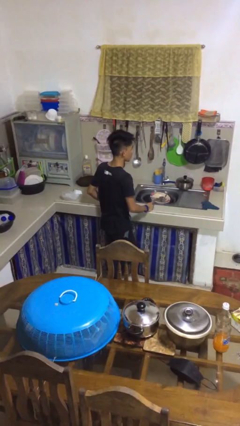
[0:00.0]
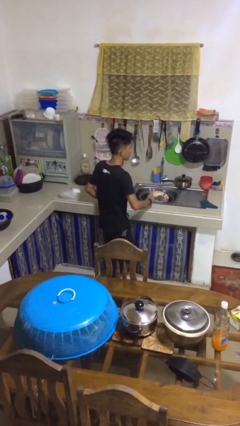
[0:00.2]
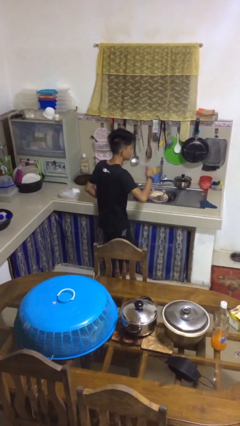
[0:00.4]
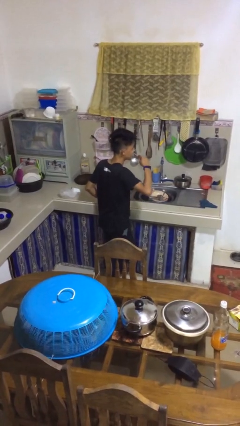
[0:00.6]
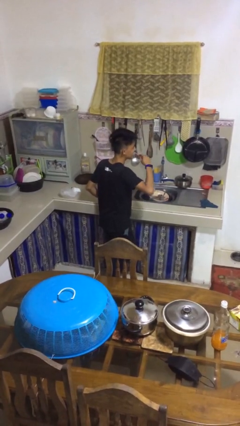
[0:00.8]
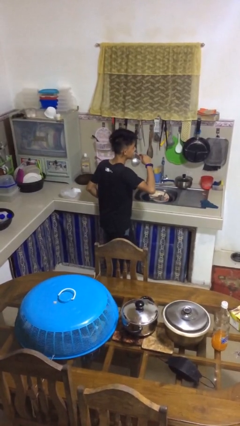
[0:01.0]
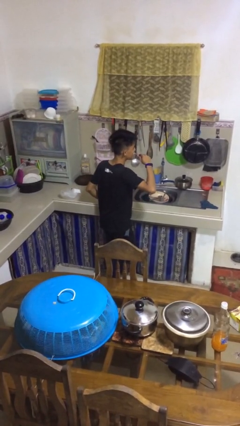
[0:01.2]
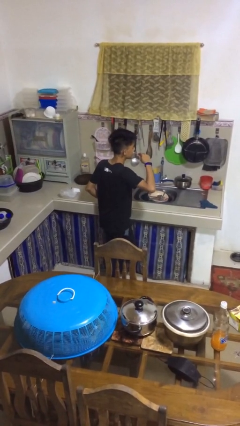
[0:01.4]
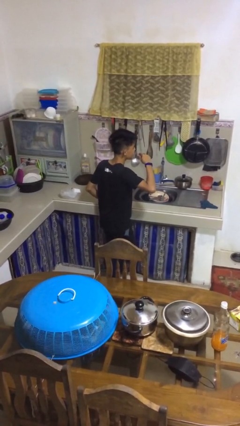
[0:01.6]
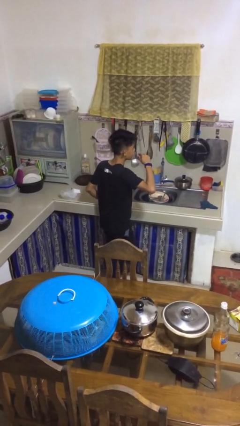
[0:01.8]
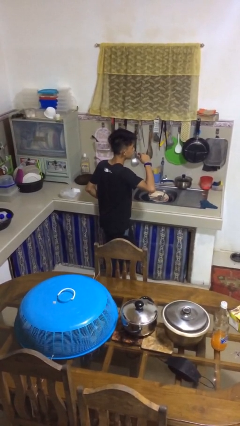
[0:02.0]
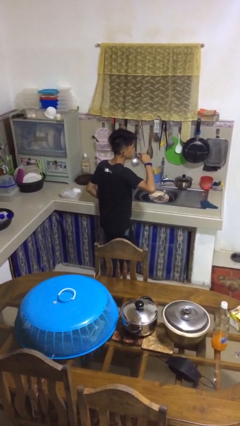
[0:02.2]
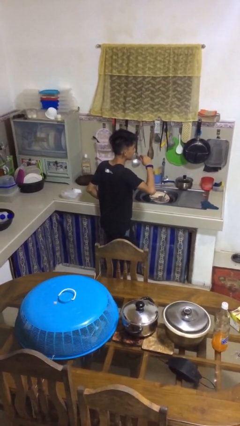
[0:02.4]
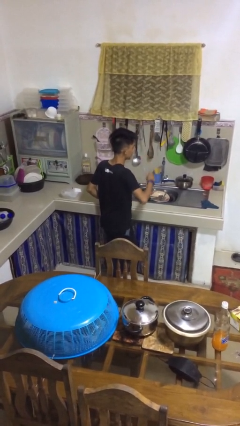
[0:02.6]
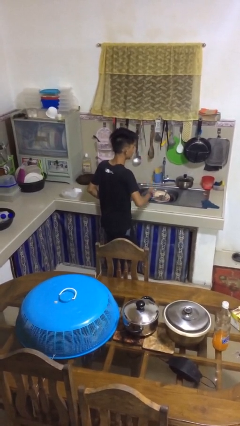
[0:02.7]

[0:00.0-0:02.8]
person brushes teeth

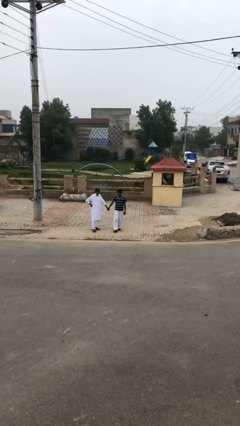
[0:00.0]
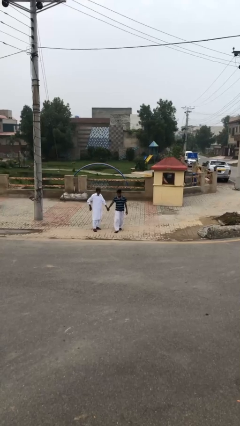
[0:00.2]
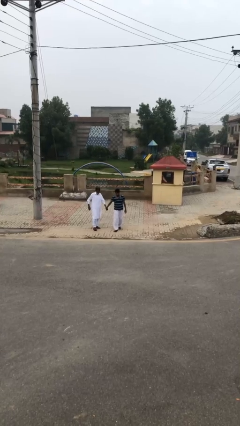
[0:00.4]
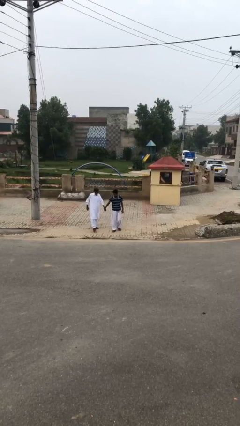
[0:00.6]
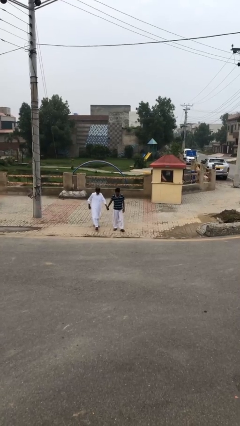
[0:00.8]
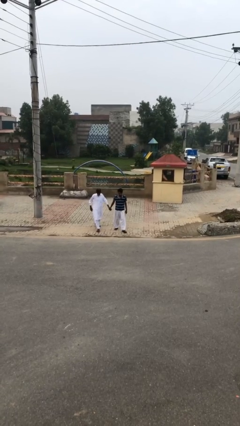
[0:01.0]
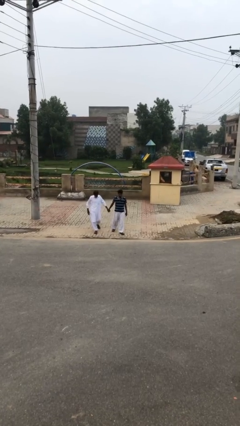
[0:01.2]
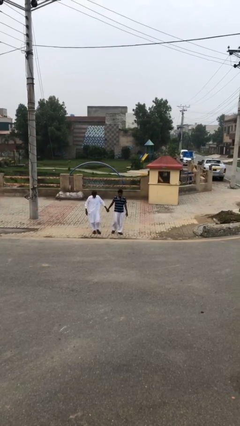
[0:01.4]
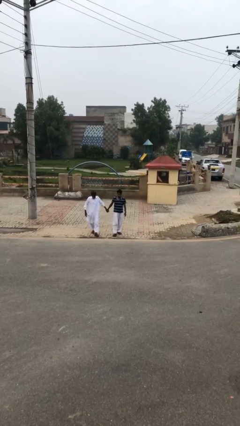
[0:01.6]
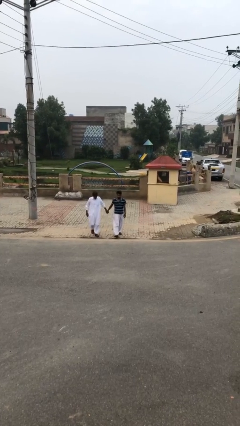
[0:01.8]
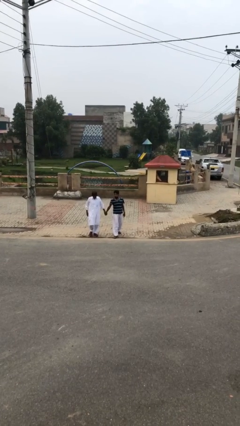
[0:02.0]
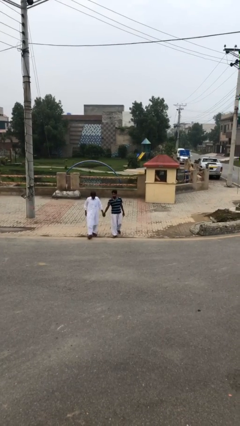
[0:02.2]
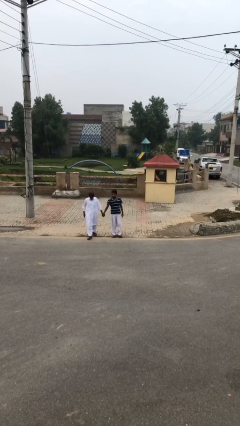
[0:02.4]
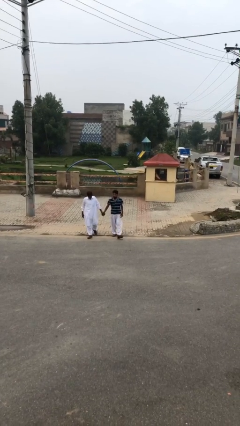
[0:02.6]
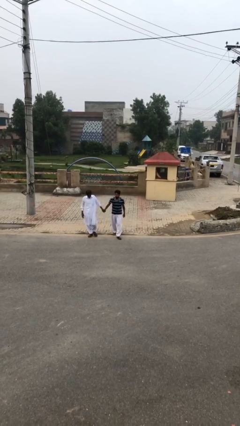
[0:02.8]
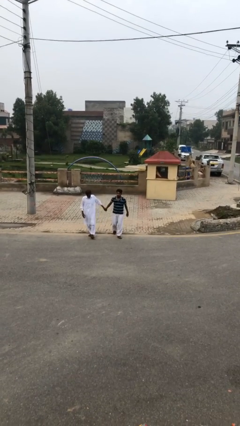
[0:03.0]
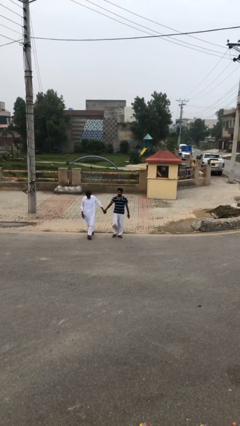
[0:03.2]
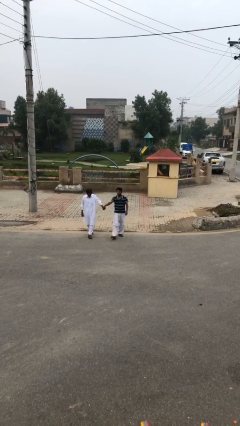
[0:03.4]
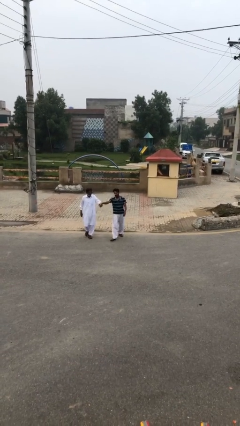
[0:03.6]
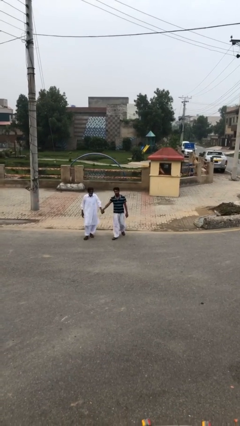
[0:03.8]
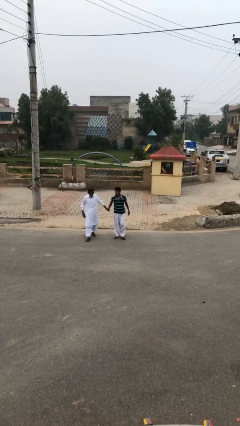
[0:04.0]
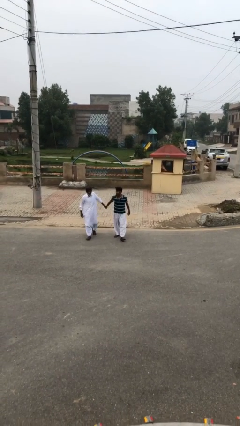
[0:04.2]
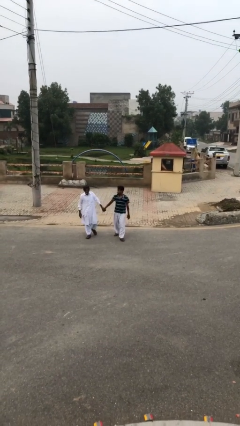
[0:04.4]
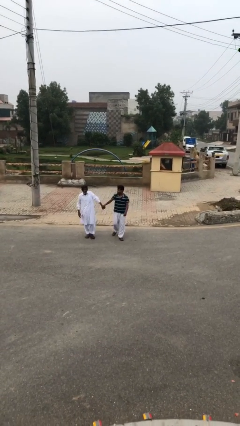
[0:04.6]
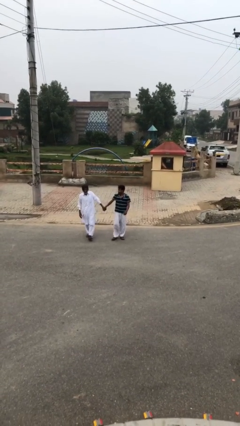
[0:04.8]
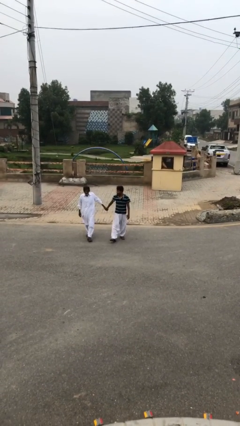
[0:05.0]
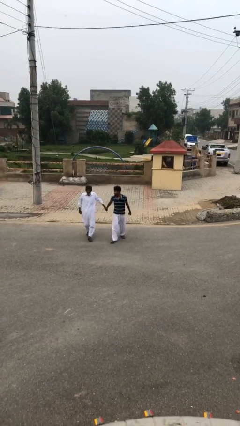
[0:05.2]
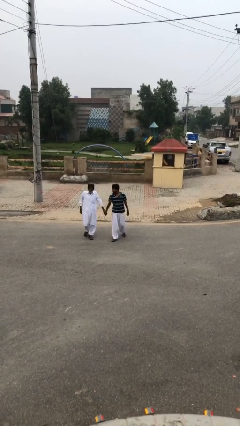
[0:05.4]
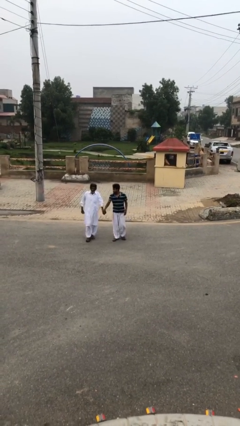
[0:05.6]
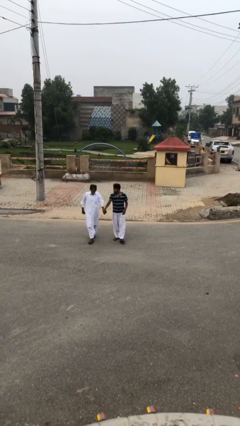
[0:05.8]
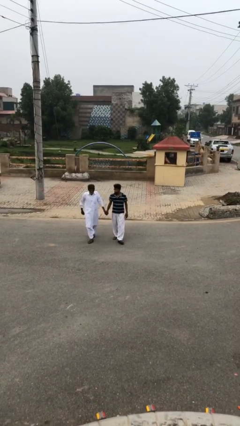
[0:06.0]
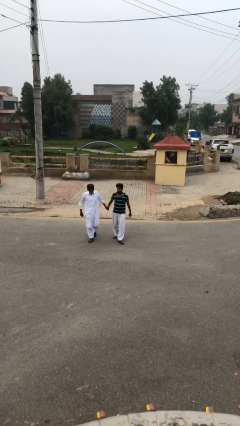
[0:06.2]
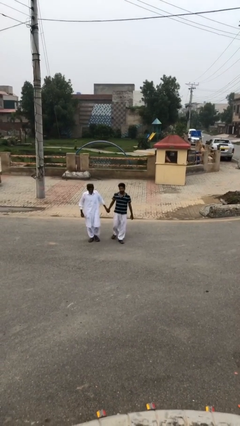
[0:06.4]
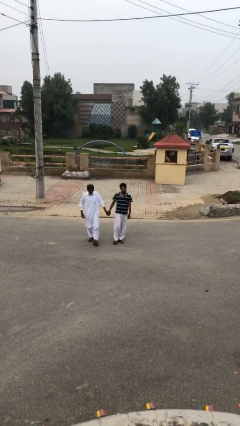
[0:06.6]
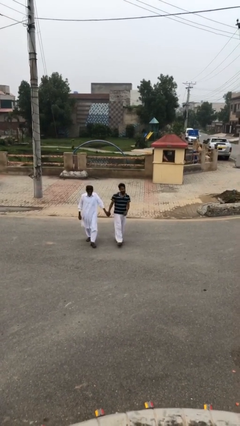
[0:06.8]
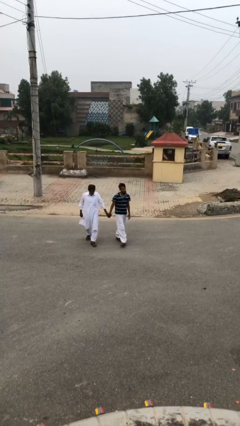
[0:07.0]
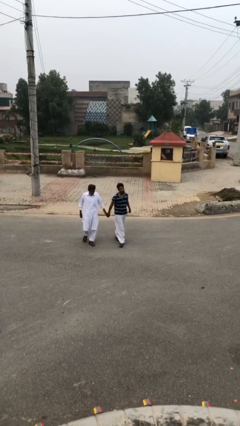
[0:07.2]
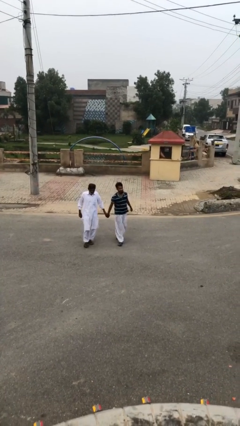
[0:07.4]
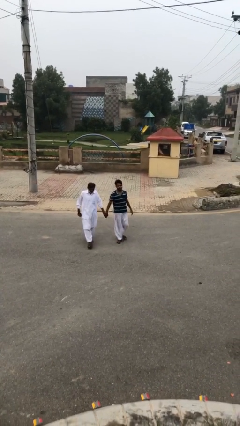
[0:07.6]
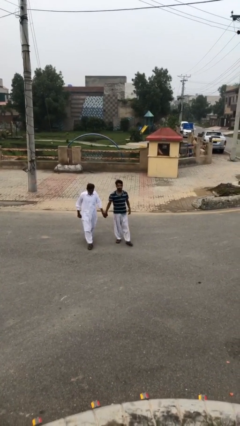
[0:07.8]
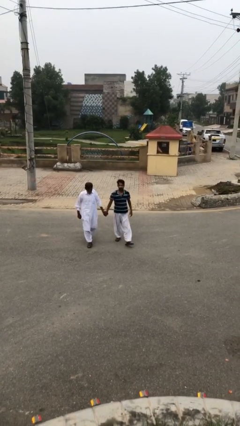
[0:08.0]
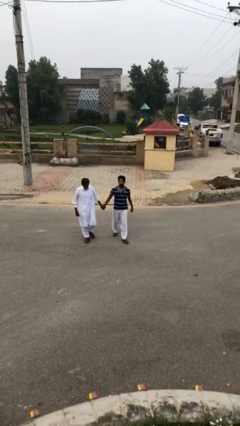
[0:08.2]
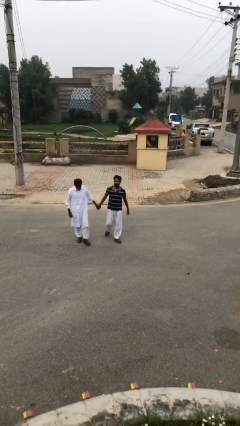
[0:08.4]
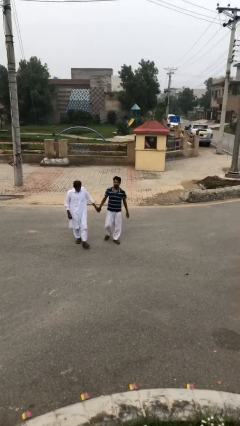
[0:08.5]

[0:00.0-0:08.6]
person holds hand

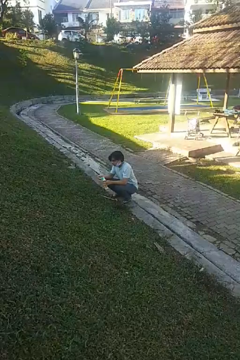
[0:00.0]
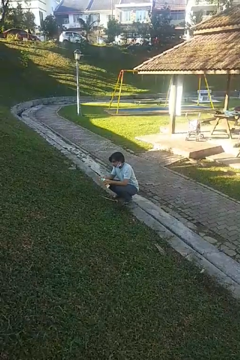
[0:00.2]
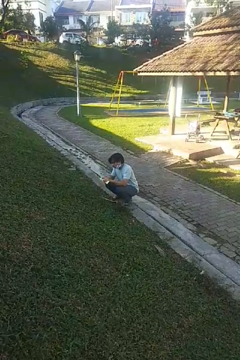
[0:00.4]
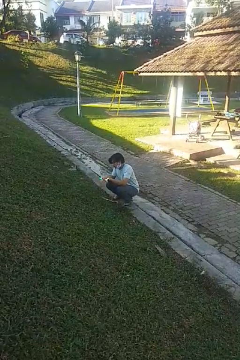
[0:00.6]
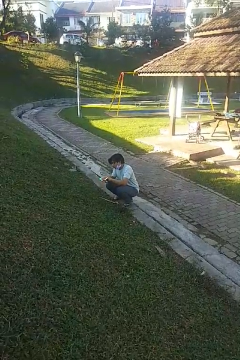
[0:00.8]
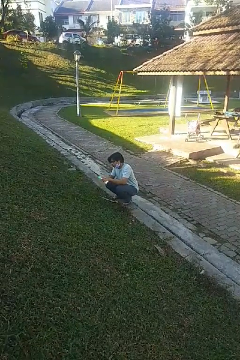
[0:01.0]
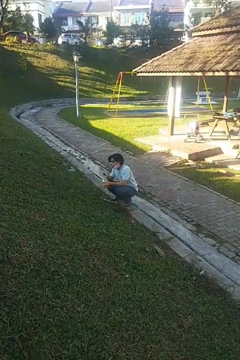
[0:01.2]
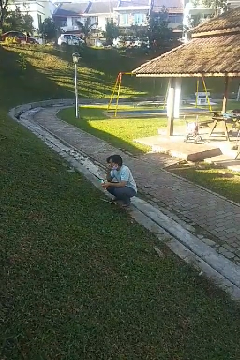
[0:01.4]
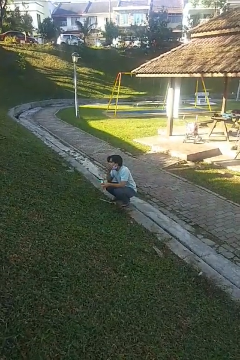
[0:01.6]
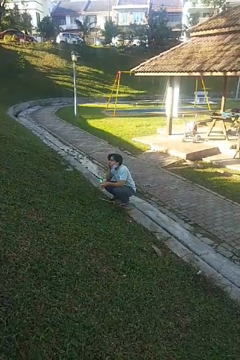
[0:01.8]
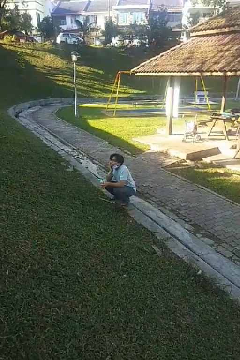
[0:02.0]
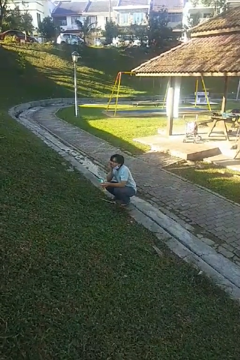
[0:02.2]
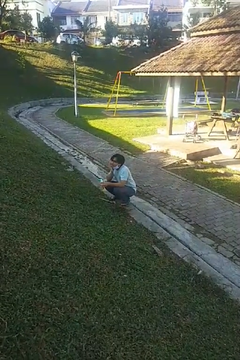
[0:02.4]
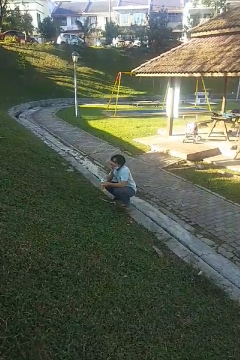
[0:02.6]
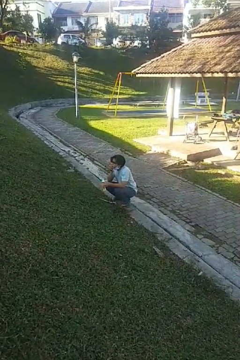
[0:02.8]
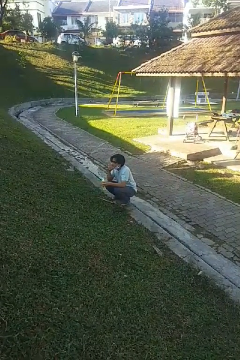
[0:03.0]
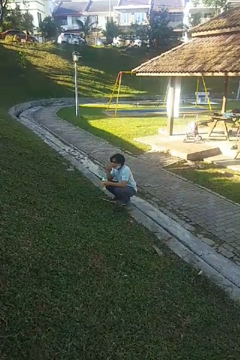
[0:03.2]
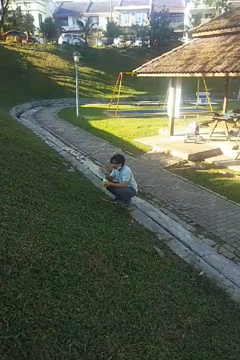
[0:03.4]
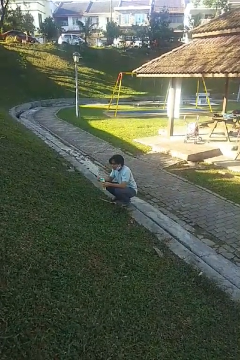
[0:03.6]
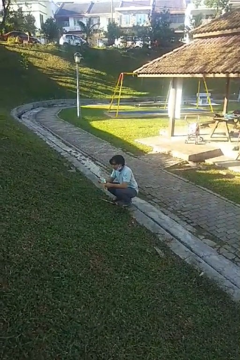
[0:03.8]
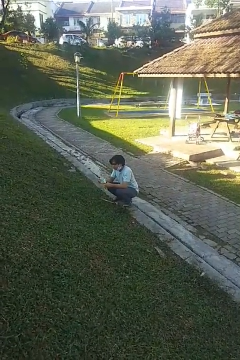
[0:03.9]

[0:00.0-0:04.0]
person applies facial moisturizer

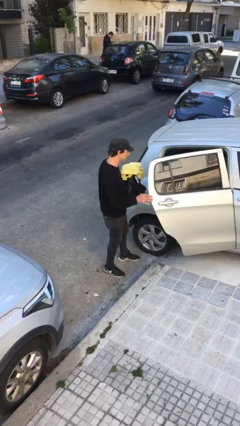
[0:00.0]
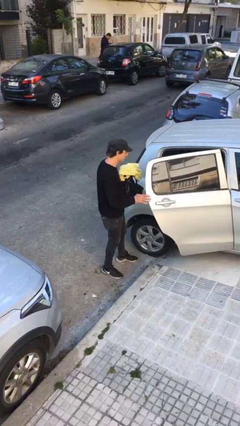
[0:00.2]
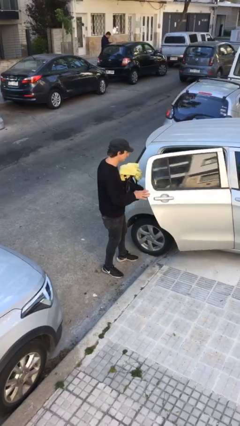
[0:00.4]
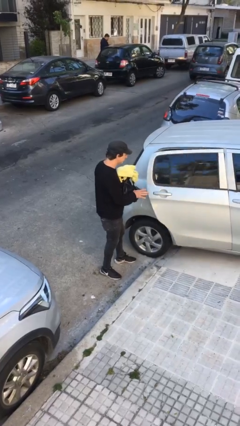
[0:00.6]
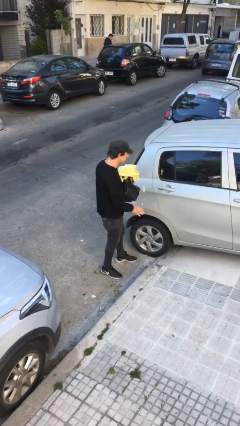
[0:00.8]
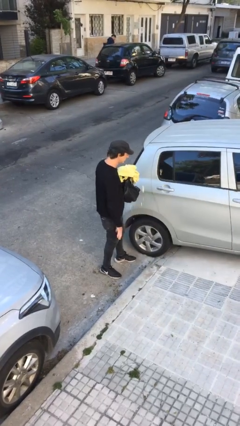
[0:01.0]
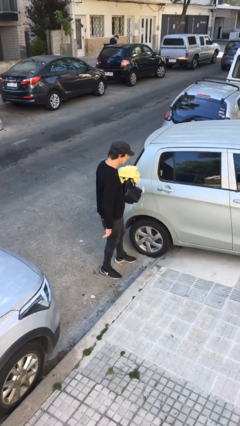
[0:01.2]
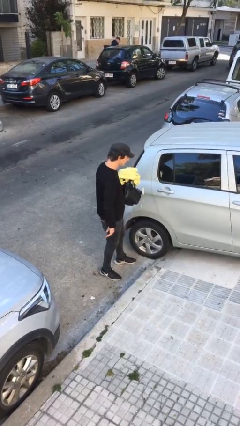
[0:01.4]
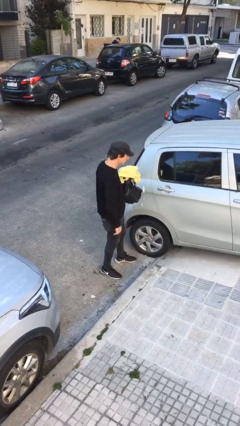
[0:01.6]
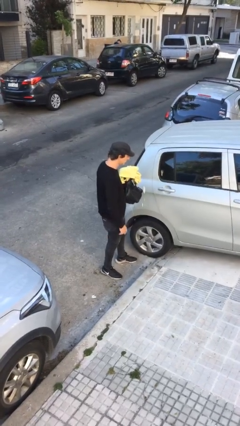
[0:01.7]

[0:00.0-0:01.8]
person closes car door

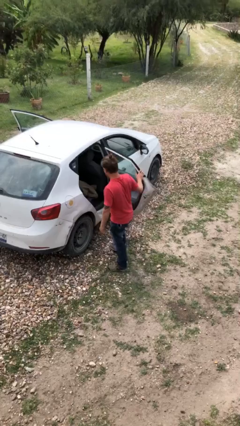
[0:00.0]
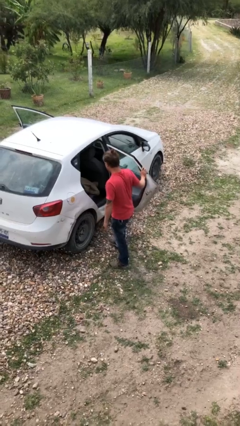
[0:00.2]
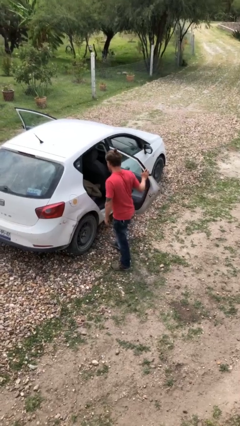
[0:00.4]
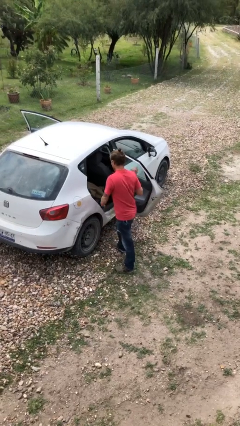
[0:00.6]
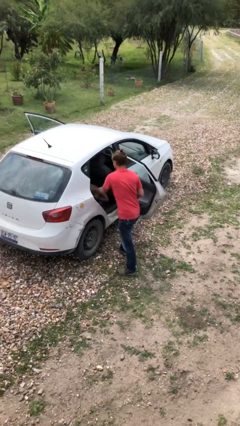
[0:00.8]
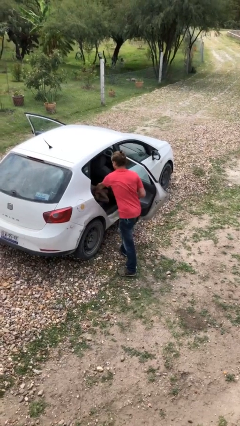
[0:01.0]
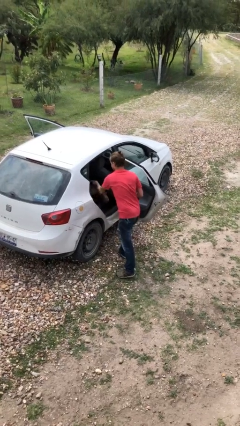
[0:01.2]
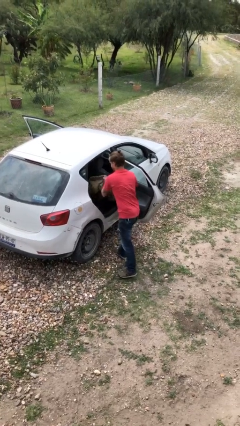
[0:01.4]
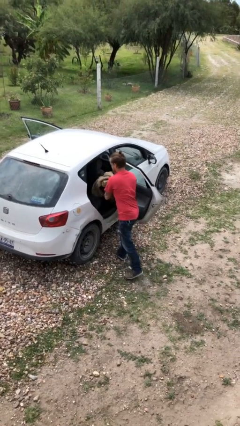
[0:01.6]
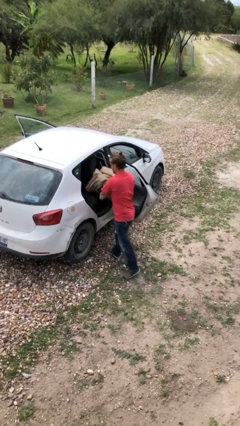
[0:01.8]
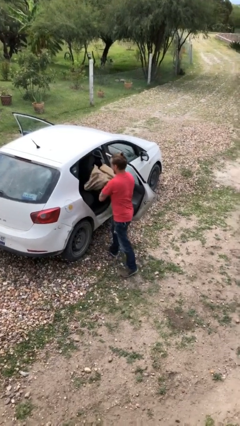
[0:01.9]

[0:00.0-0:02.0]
person unloads car
